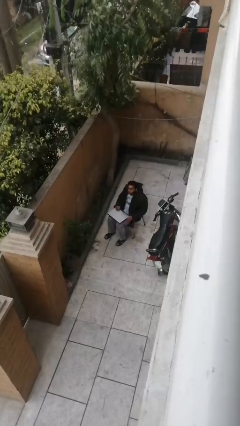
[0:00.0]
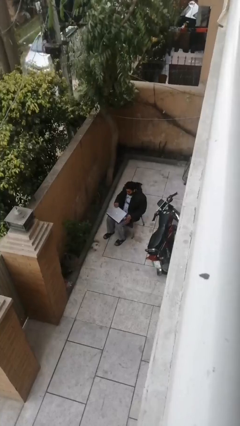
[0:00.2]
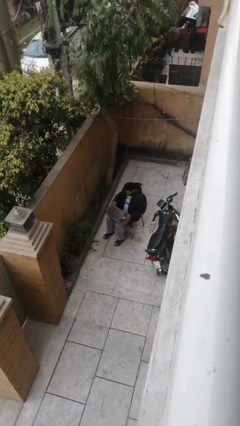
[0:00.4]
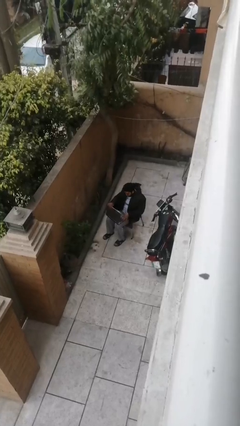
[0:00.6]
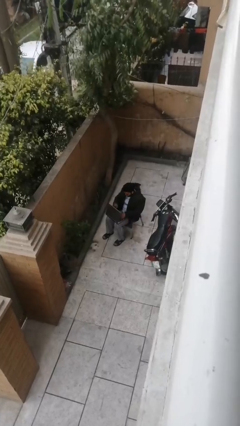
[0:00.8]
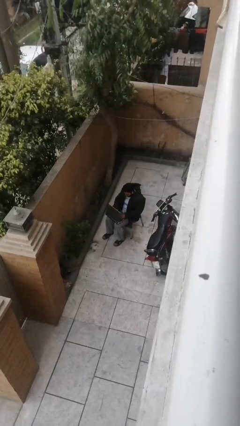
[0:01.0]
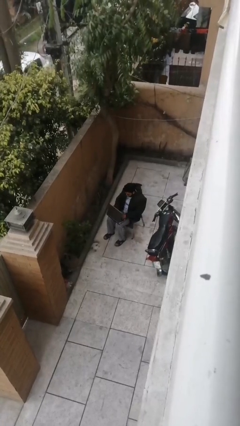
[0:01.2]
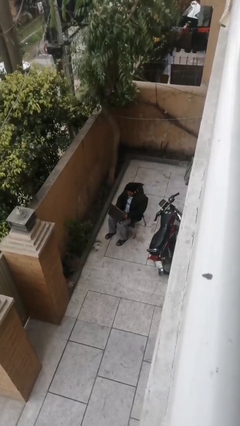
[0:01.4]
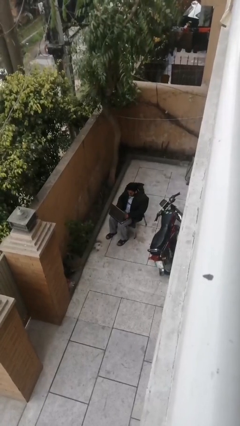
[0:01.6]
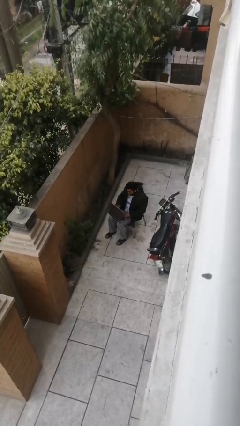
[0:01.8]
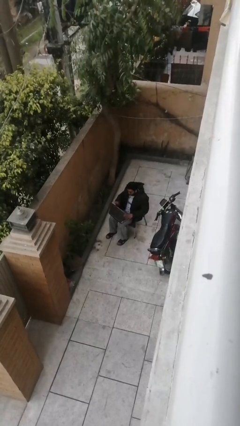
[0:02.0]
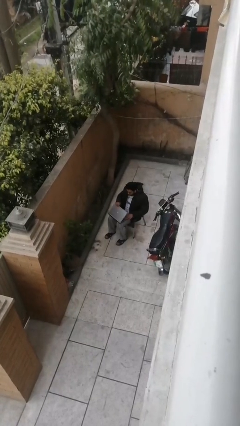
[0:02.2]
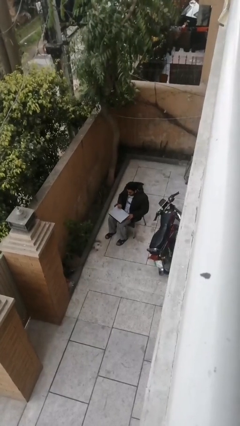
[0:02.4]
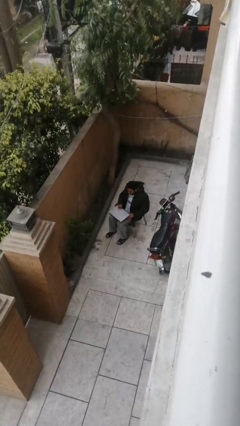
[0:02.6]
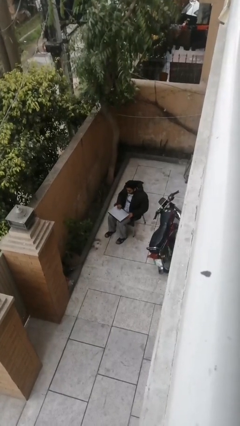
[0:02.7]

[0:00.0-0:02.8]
person interacts with laptop

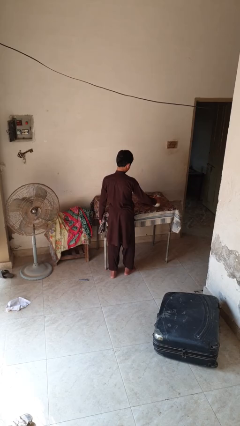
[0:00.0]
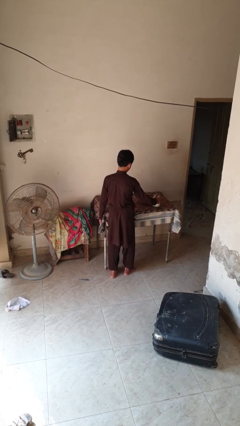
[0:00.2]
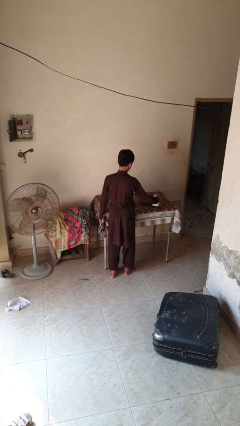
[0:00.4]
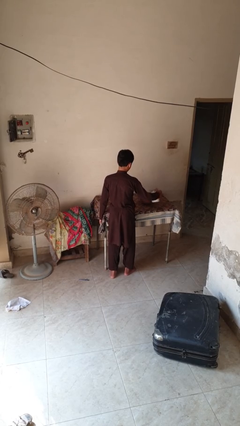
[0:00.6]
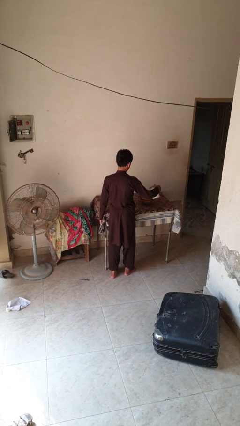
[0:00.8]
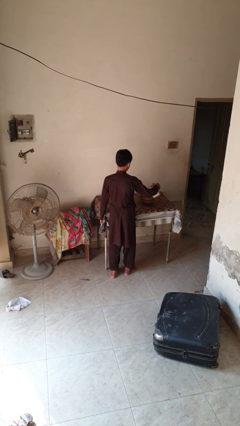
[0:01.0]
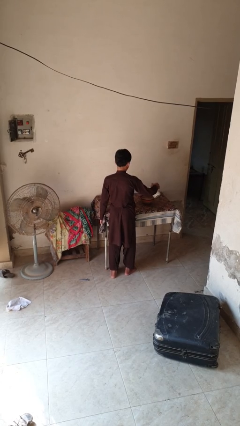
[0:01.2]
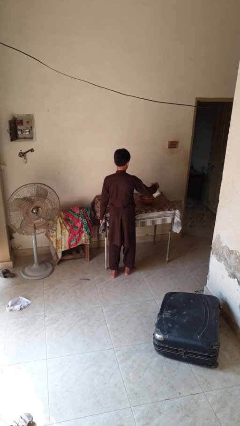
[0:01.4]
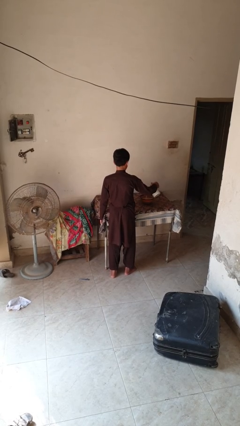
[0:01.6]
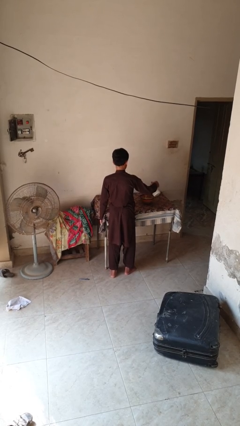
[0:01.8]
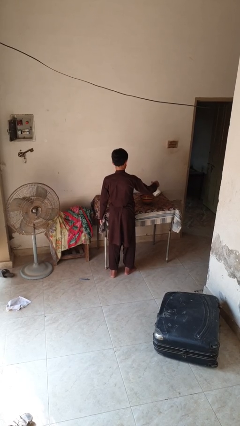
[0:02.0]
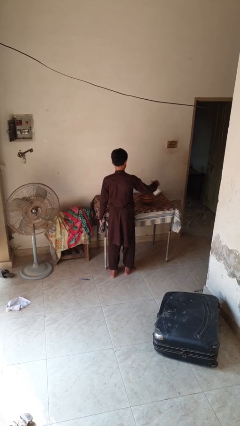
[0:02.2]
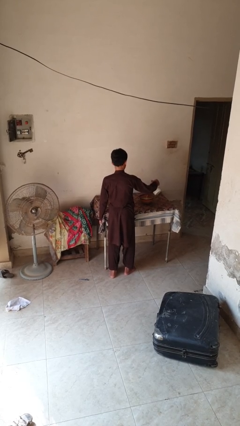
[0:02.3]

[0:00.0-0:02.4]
person pours into bowl

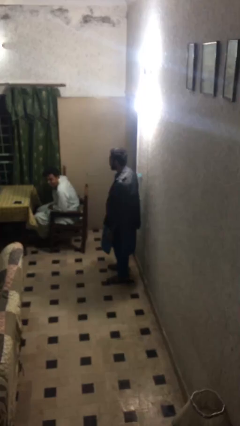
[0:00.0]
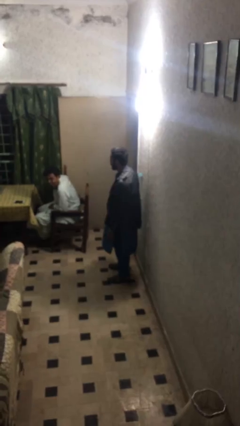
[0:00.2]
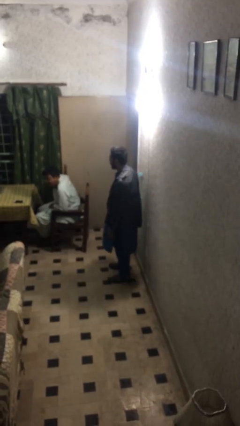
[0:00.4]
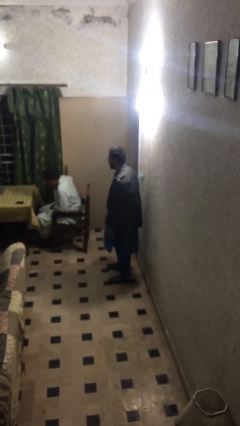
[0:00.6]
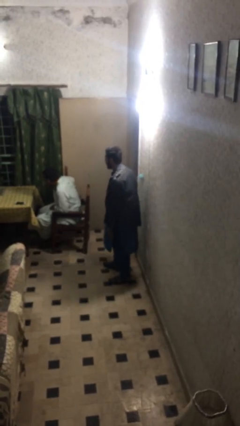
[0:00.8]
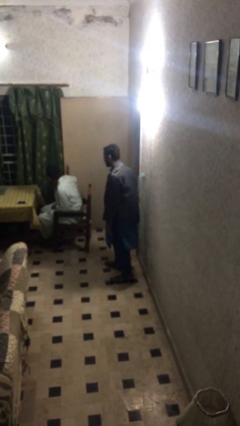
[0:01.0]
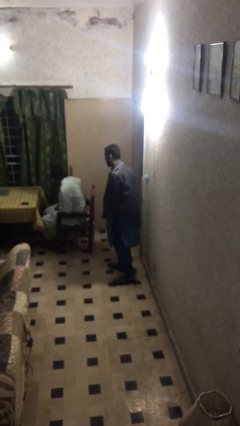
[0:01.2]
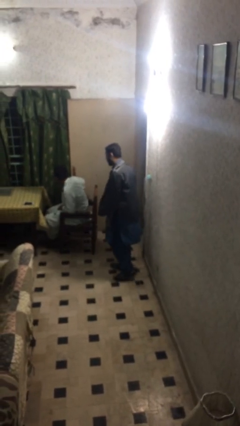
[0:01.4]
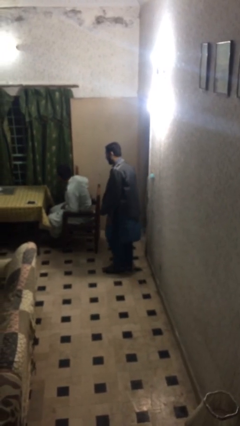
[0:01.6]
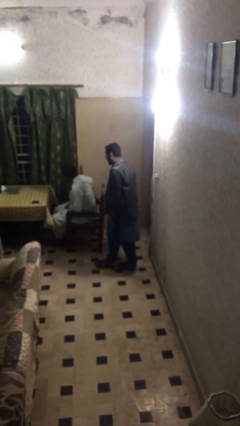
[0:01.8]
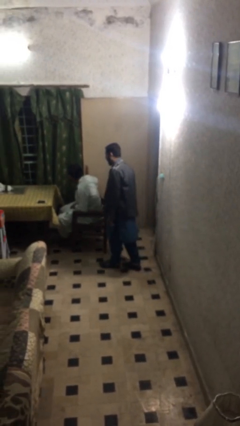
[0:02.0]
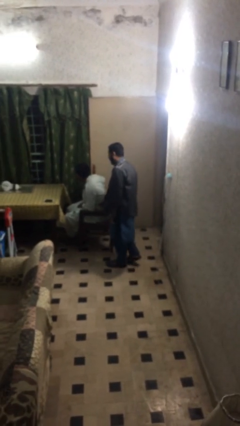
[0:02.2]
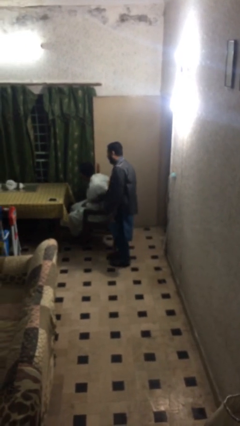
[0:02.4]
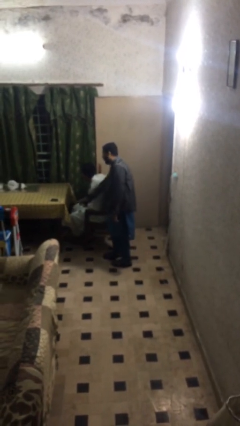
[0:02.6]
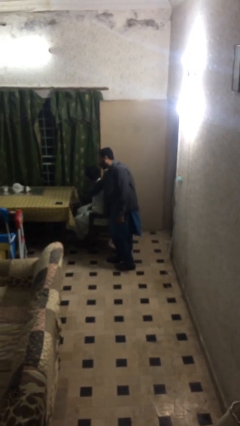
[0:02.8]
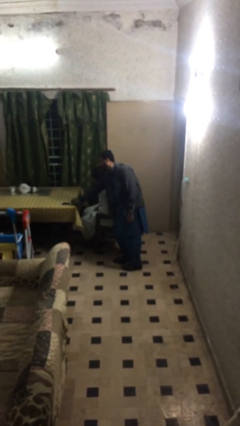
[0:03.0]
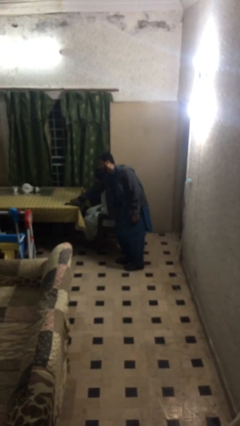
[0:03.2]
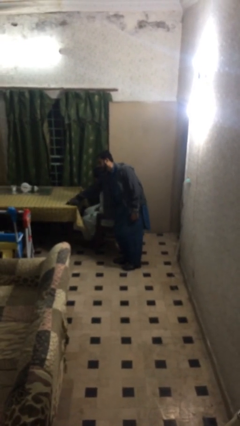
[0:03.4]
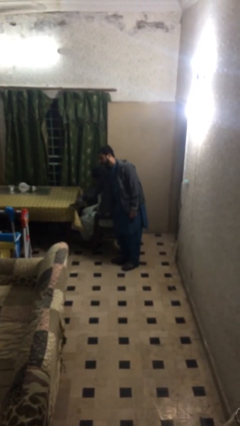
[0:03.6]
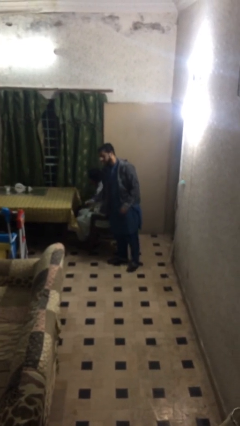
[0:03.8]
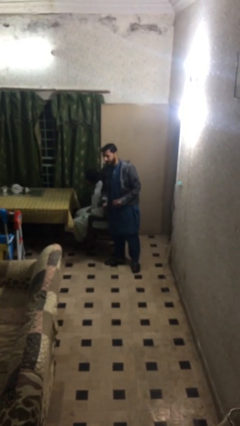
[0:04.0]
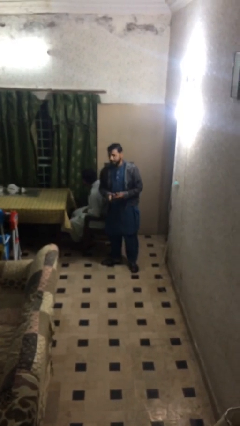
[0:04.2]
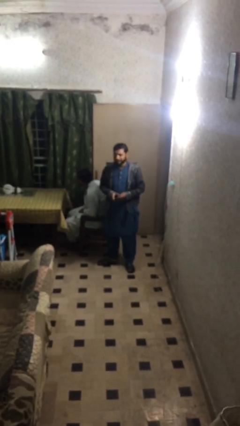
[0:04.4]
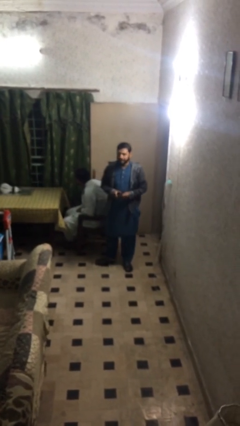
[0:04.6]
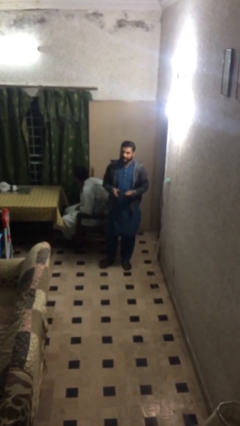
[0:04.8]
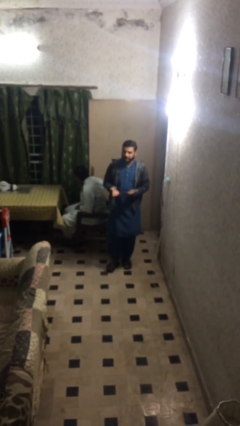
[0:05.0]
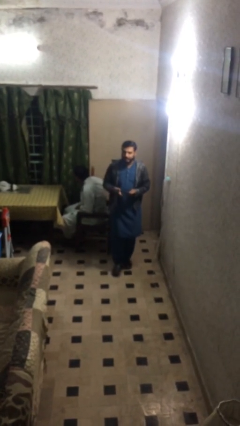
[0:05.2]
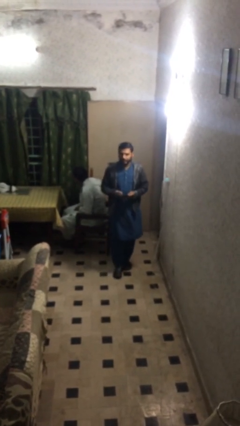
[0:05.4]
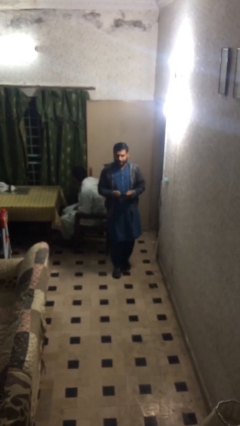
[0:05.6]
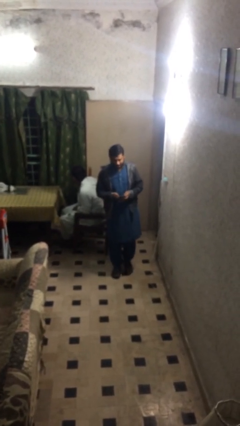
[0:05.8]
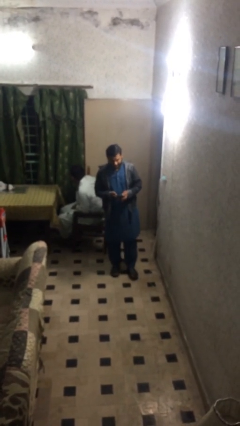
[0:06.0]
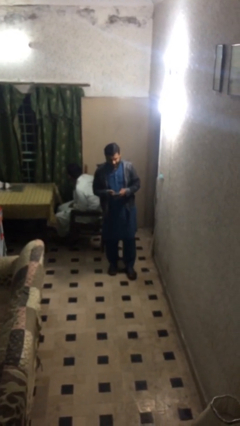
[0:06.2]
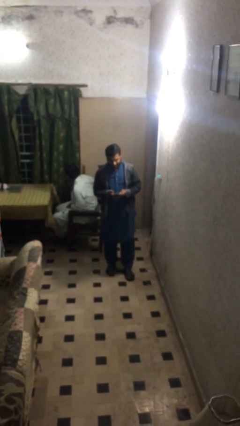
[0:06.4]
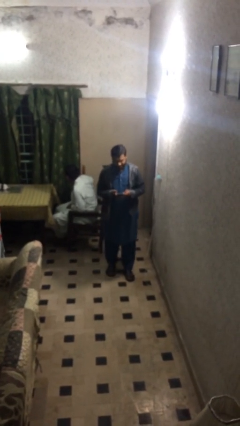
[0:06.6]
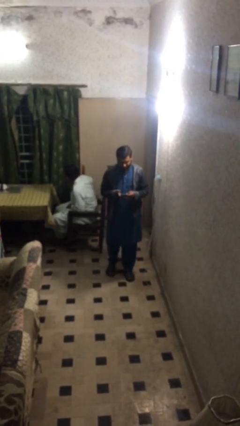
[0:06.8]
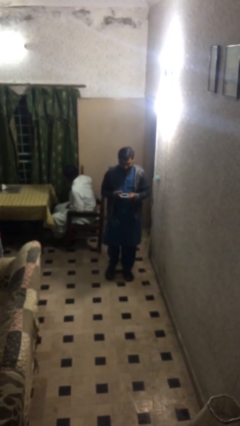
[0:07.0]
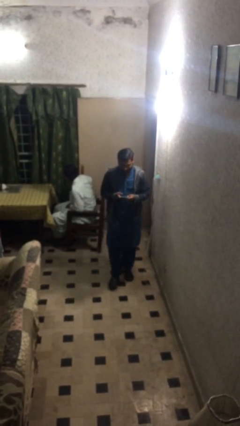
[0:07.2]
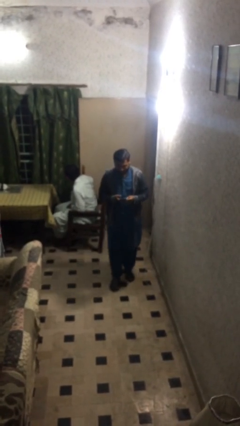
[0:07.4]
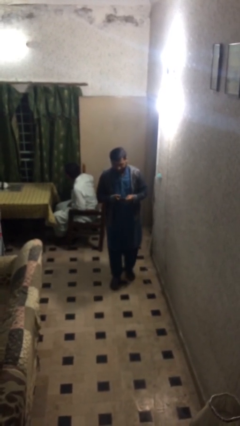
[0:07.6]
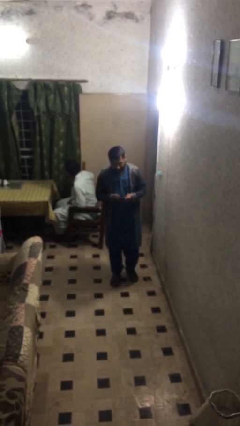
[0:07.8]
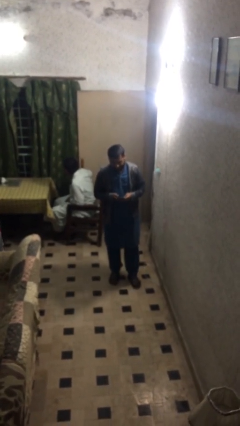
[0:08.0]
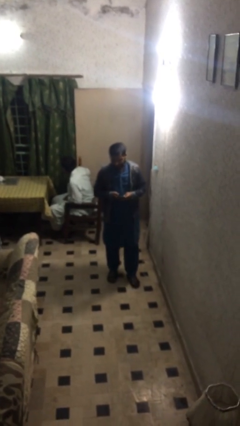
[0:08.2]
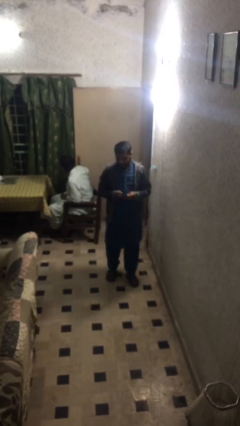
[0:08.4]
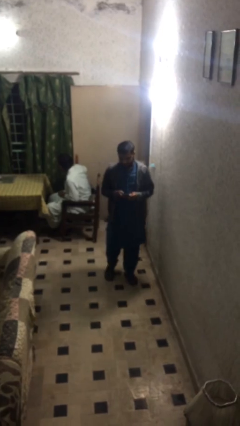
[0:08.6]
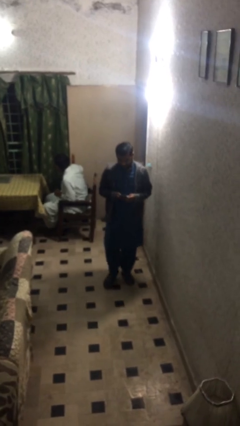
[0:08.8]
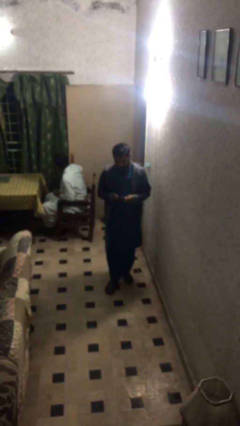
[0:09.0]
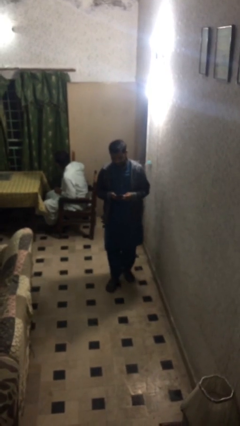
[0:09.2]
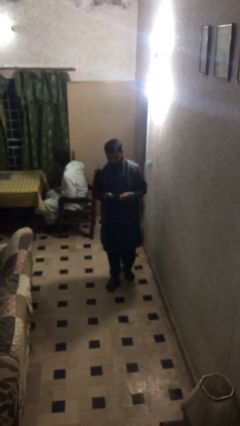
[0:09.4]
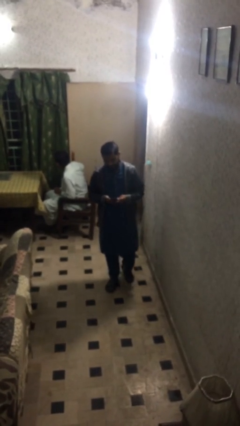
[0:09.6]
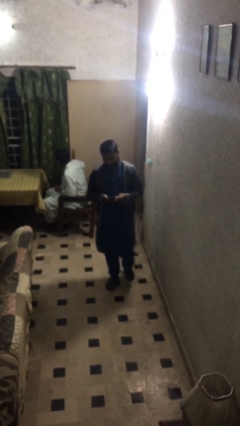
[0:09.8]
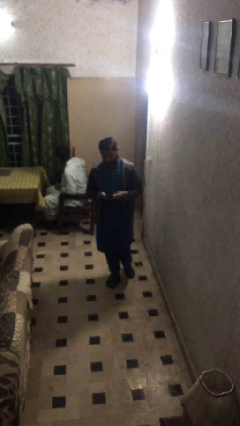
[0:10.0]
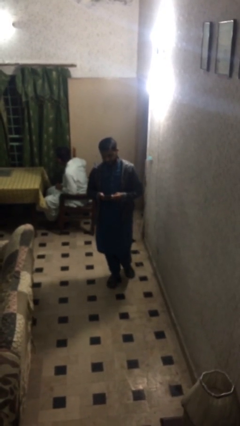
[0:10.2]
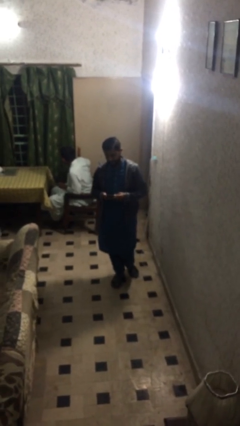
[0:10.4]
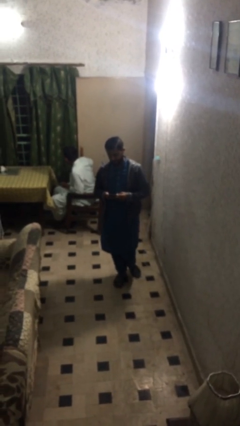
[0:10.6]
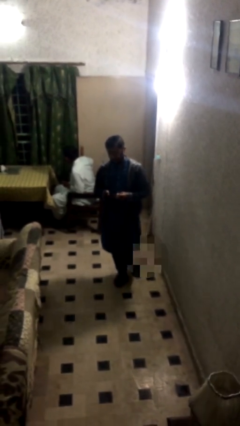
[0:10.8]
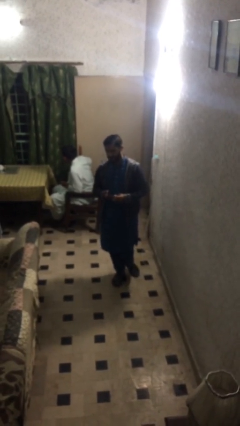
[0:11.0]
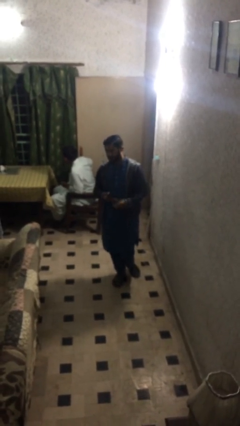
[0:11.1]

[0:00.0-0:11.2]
person steals object from person

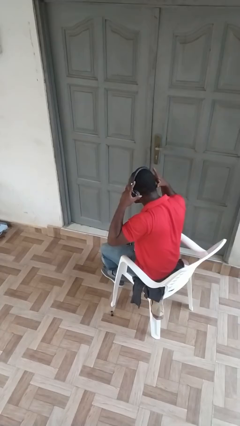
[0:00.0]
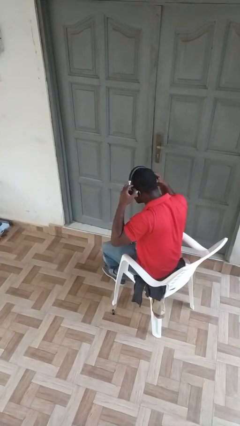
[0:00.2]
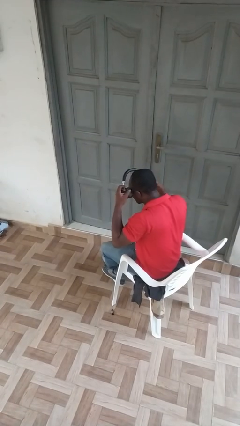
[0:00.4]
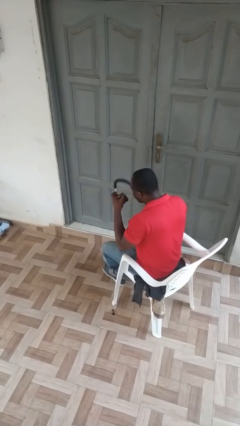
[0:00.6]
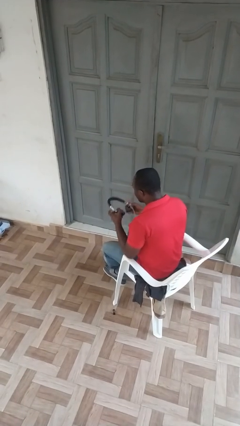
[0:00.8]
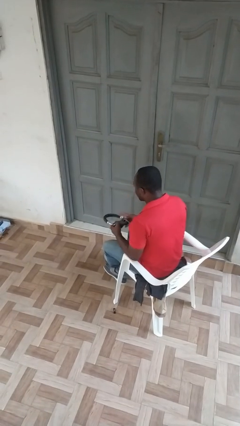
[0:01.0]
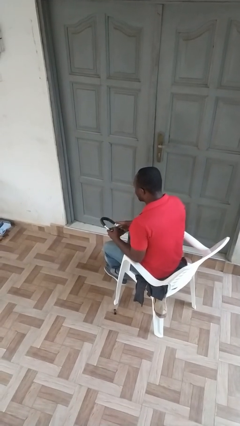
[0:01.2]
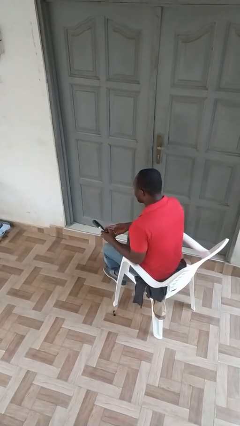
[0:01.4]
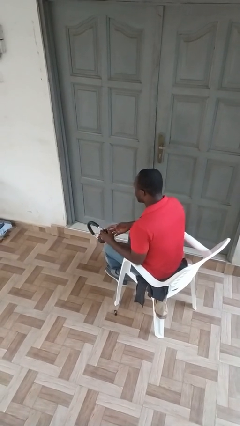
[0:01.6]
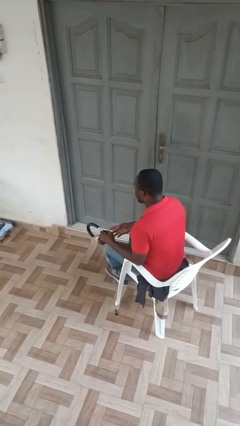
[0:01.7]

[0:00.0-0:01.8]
person takes off headphones
